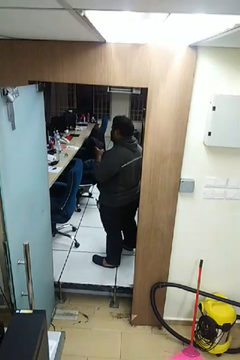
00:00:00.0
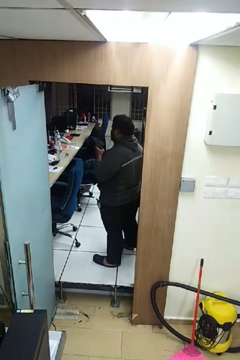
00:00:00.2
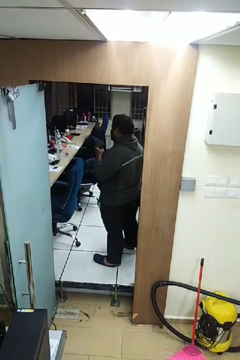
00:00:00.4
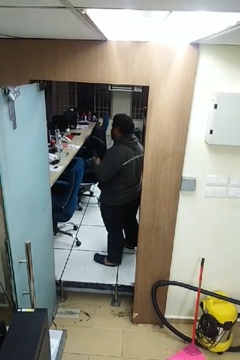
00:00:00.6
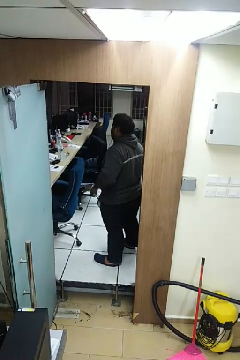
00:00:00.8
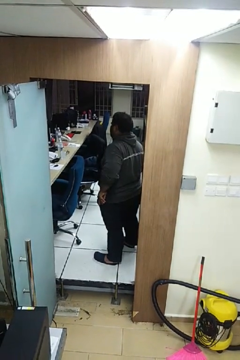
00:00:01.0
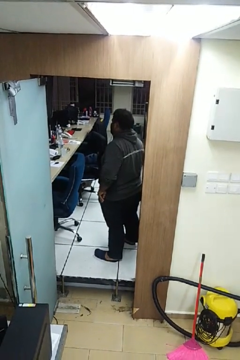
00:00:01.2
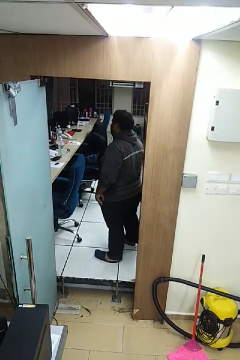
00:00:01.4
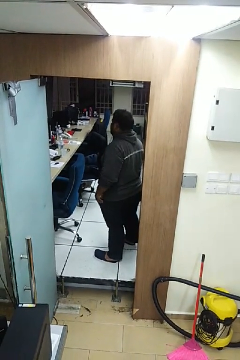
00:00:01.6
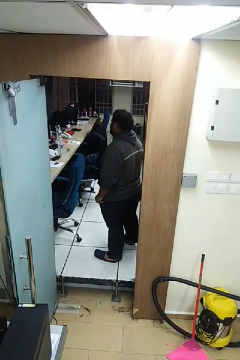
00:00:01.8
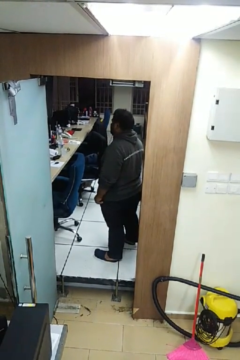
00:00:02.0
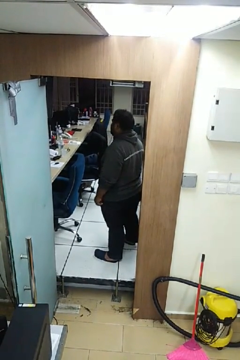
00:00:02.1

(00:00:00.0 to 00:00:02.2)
person puts phone into pocket

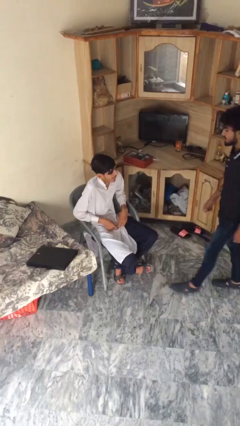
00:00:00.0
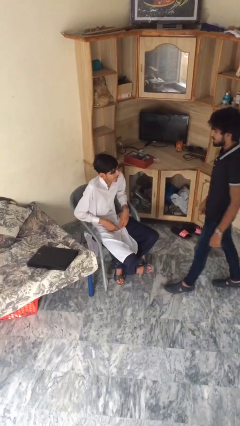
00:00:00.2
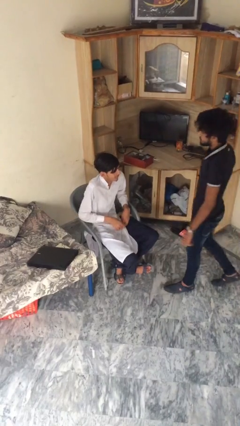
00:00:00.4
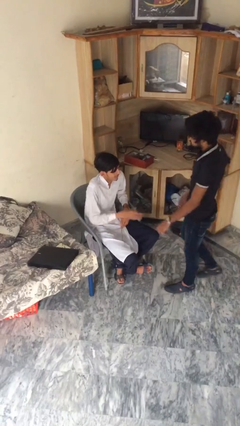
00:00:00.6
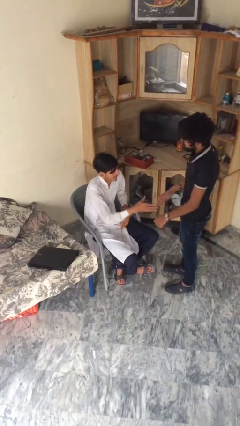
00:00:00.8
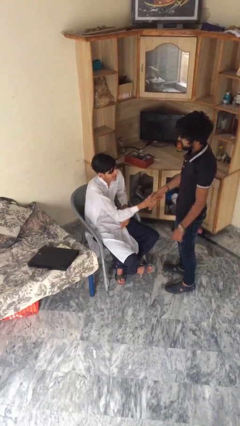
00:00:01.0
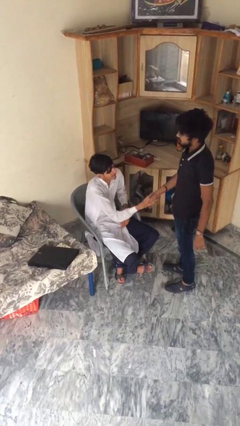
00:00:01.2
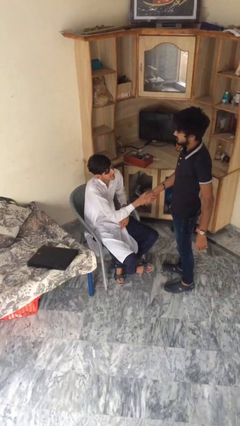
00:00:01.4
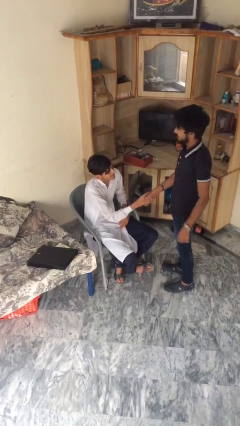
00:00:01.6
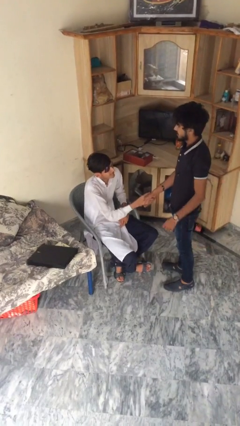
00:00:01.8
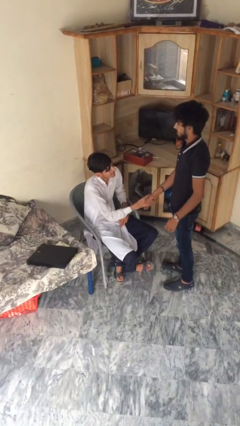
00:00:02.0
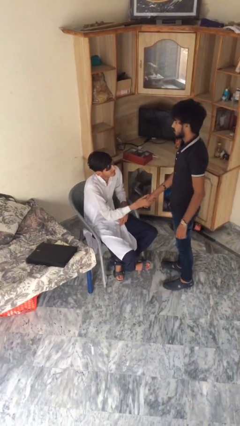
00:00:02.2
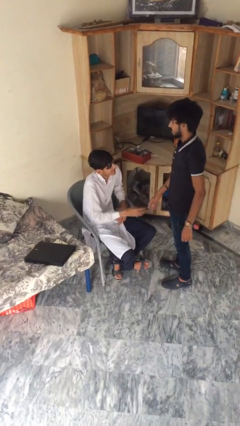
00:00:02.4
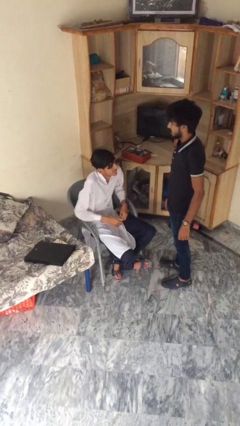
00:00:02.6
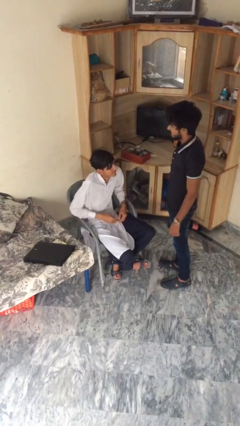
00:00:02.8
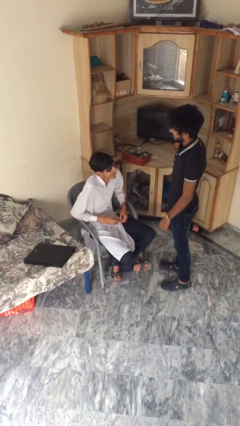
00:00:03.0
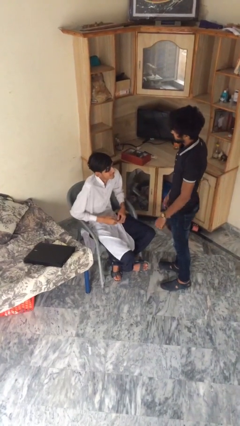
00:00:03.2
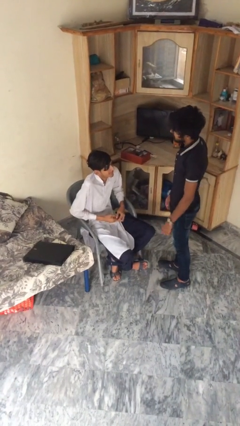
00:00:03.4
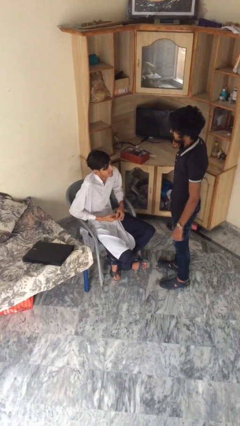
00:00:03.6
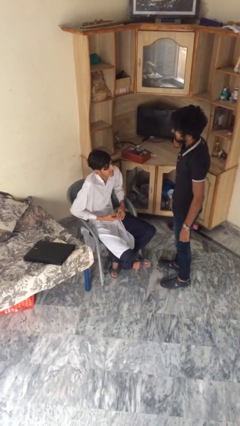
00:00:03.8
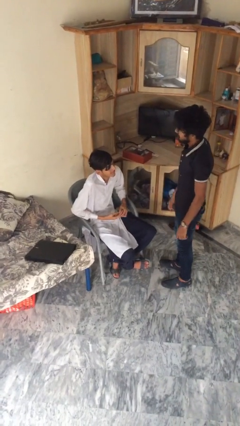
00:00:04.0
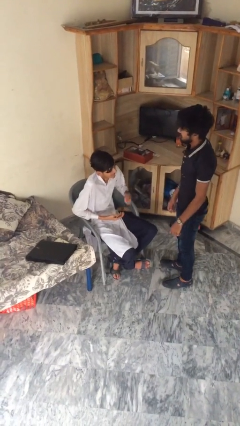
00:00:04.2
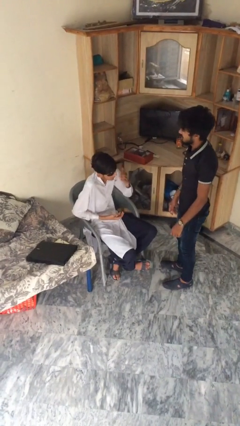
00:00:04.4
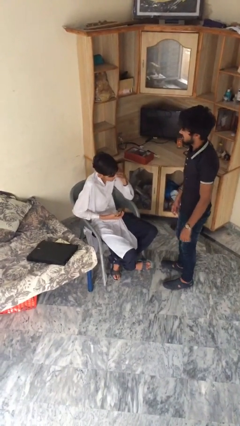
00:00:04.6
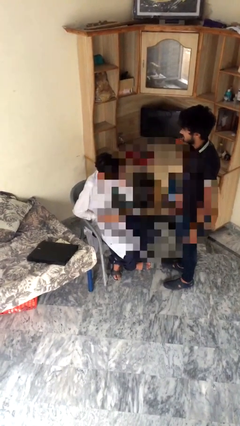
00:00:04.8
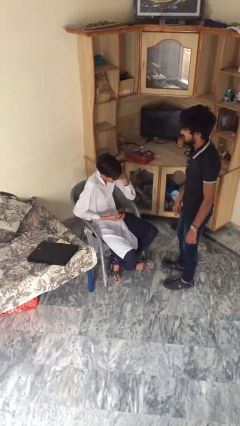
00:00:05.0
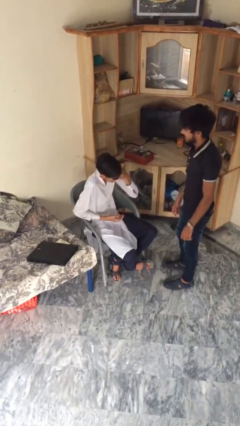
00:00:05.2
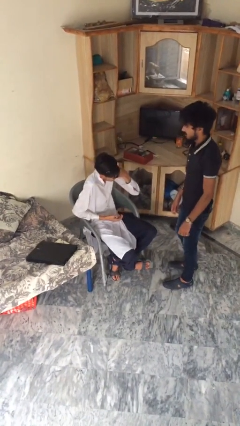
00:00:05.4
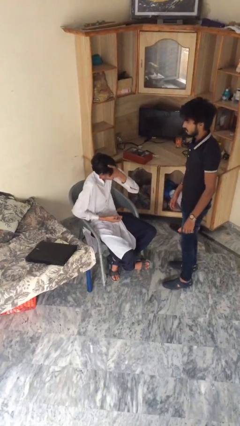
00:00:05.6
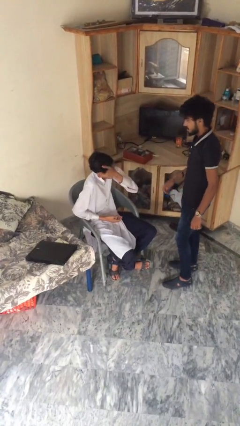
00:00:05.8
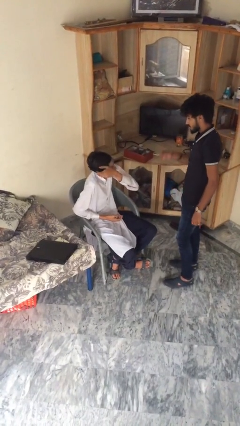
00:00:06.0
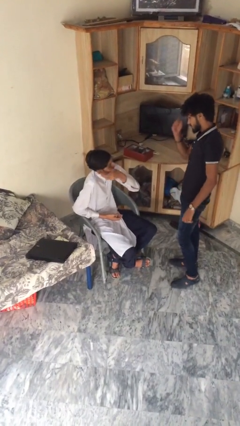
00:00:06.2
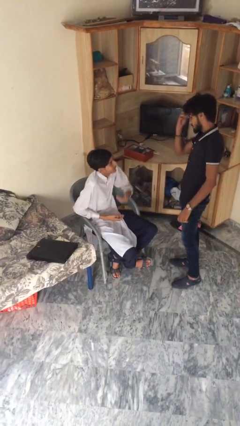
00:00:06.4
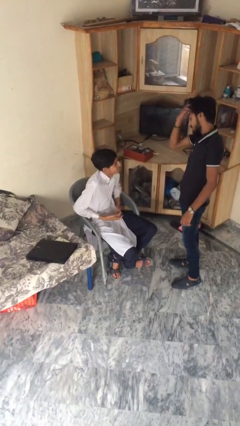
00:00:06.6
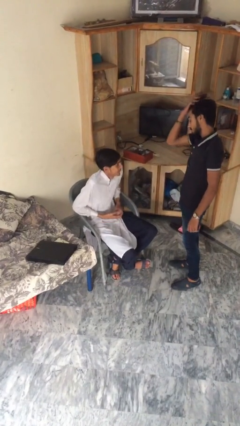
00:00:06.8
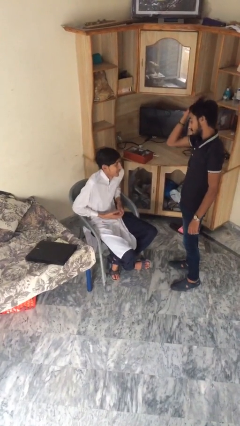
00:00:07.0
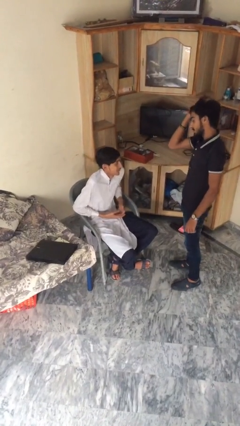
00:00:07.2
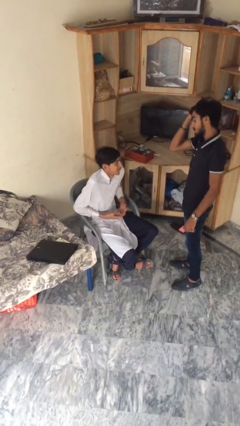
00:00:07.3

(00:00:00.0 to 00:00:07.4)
person shakes hand

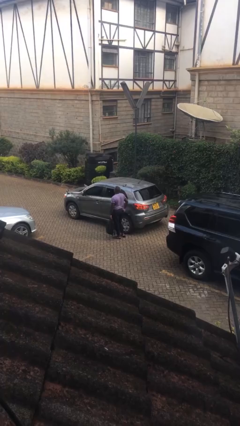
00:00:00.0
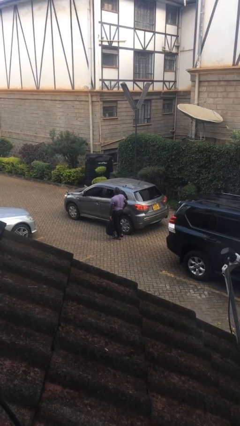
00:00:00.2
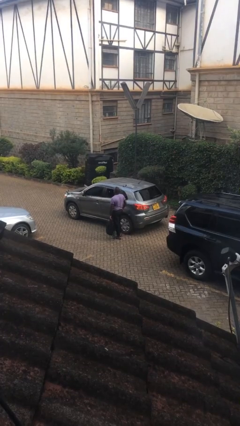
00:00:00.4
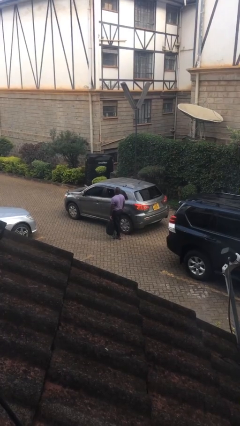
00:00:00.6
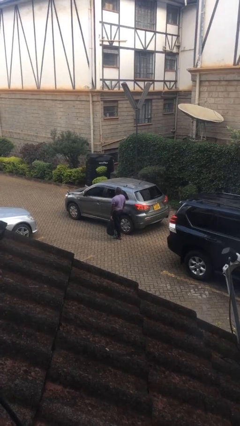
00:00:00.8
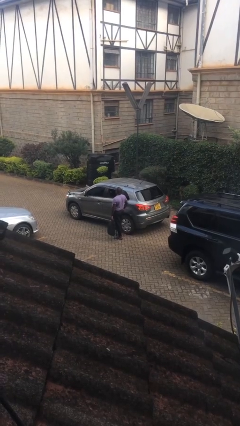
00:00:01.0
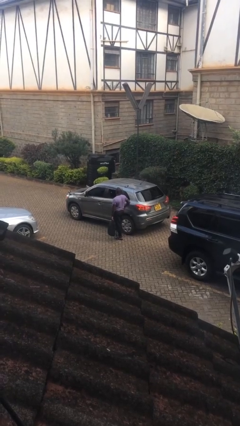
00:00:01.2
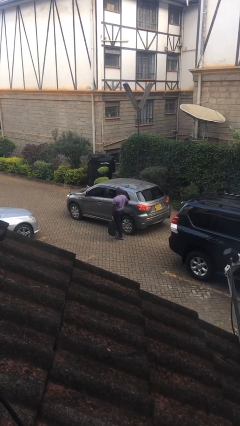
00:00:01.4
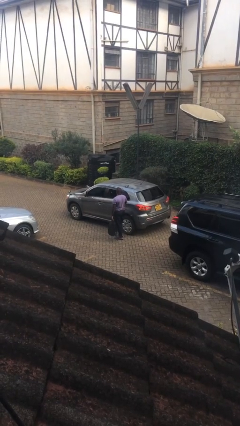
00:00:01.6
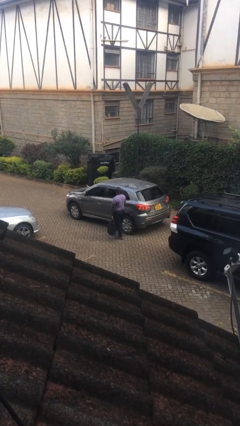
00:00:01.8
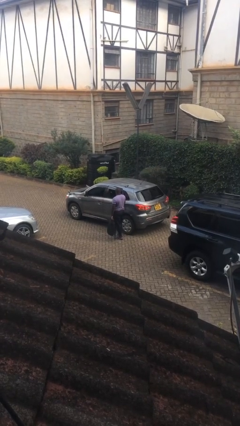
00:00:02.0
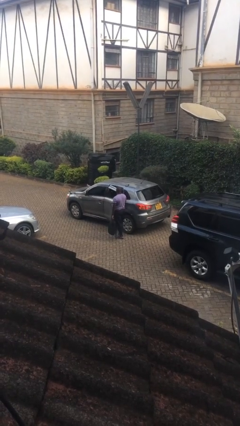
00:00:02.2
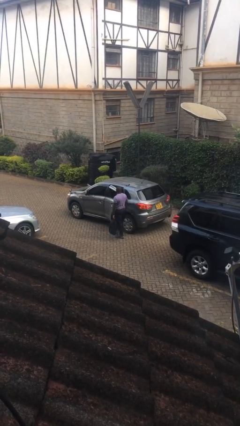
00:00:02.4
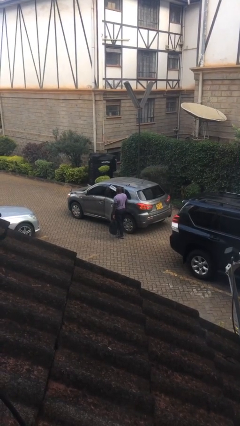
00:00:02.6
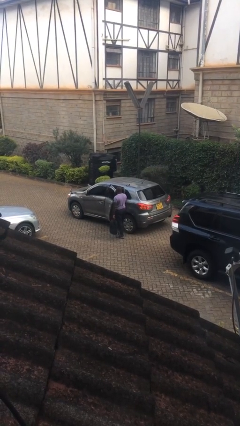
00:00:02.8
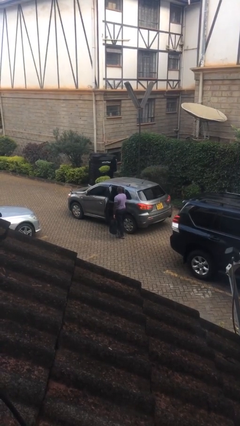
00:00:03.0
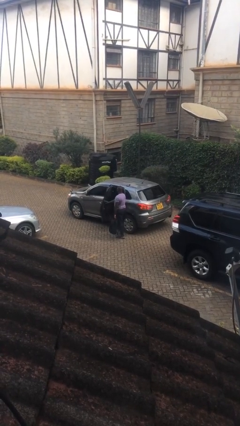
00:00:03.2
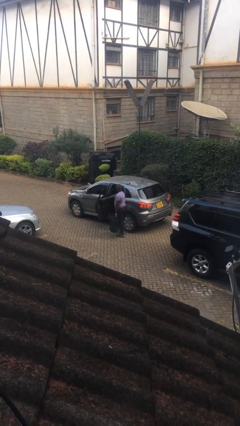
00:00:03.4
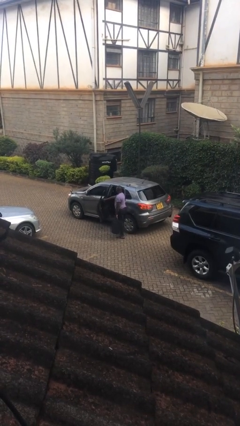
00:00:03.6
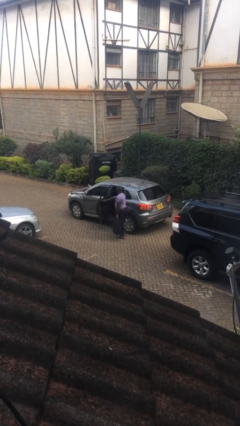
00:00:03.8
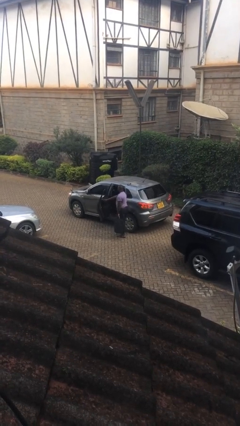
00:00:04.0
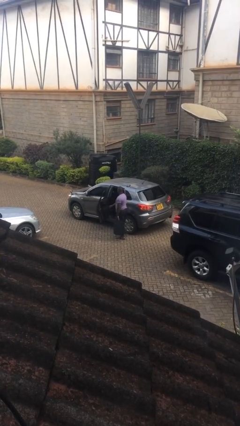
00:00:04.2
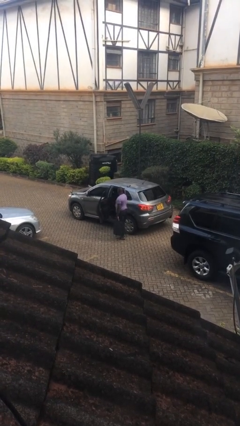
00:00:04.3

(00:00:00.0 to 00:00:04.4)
person opens car door

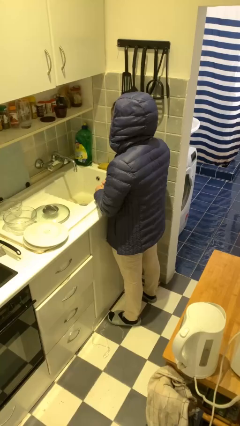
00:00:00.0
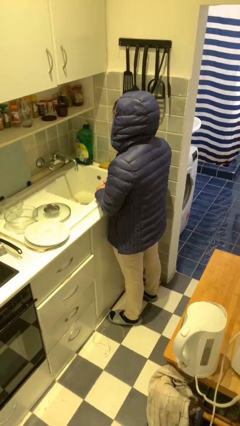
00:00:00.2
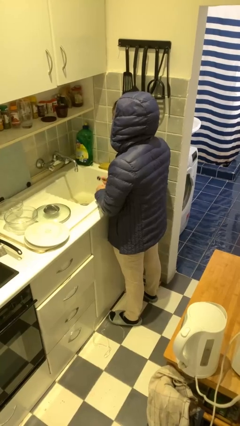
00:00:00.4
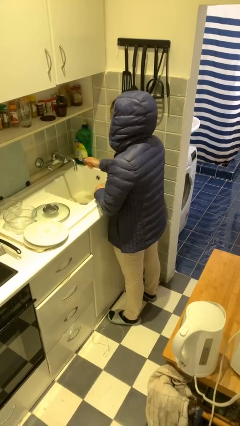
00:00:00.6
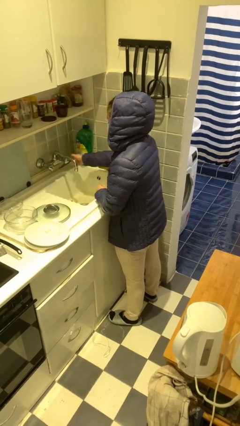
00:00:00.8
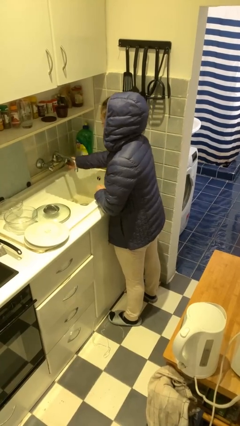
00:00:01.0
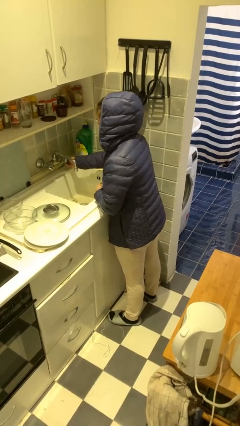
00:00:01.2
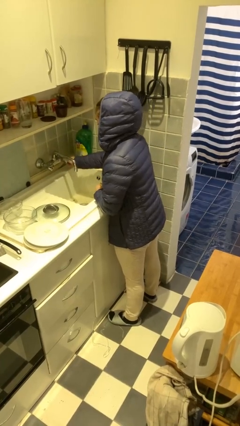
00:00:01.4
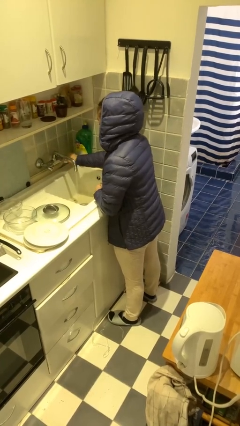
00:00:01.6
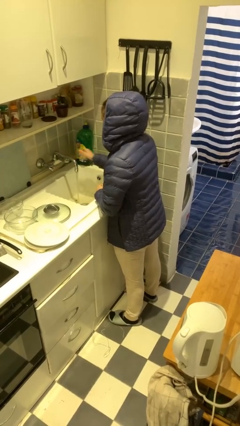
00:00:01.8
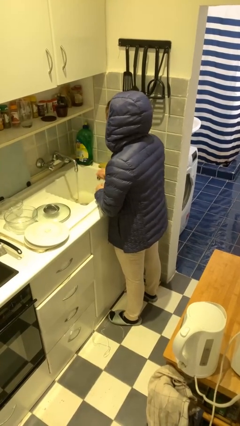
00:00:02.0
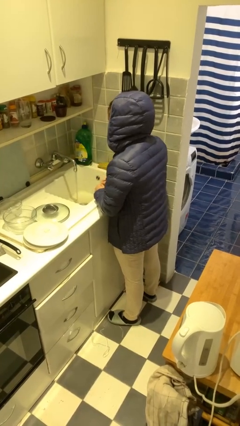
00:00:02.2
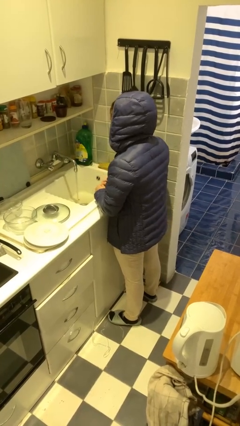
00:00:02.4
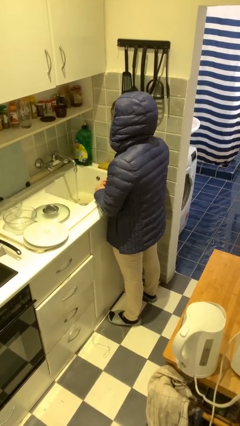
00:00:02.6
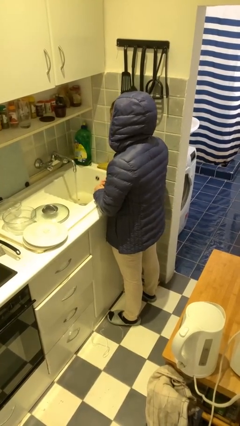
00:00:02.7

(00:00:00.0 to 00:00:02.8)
person turns on faucet

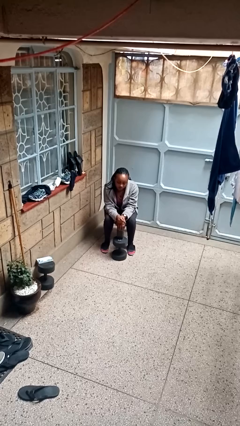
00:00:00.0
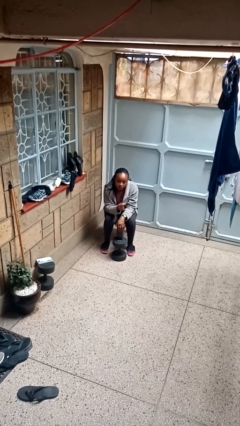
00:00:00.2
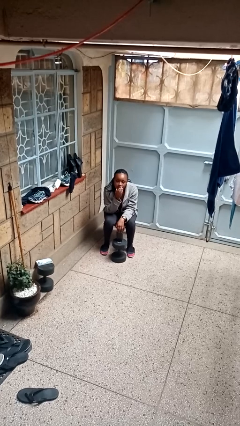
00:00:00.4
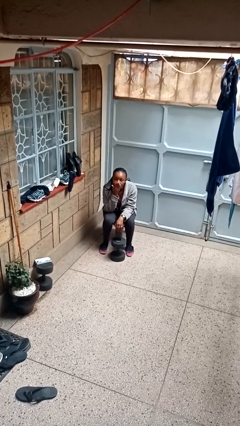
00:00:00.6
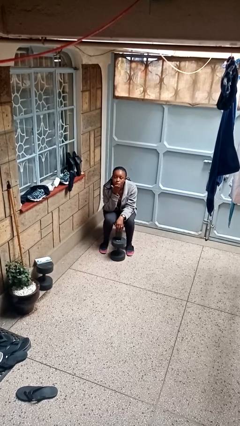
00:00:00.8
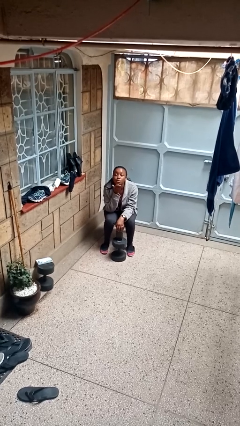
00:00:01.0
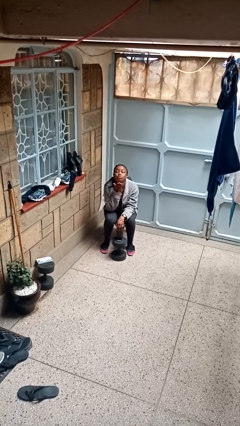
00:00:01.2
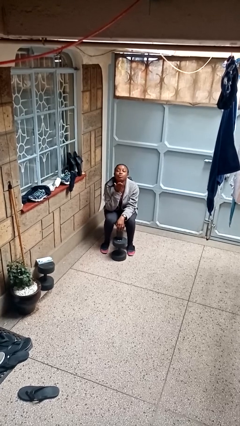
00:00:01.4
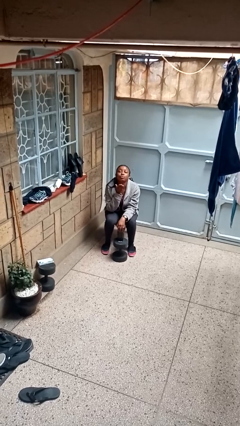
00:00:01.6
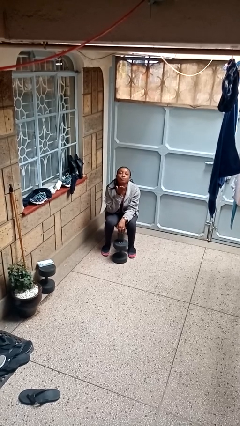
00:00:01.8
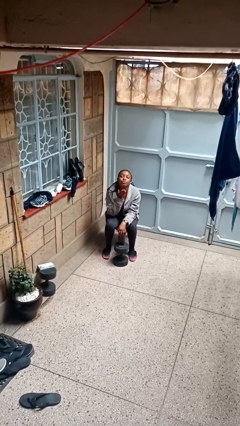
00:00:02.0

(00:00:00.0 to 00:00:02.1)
person gestures blow kiss
